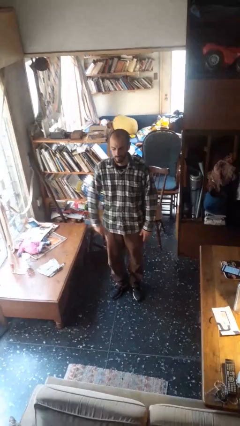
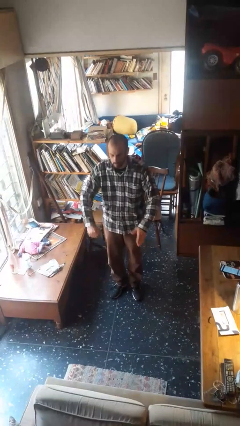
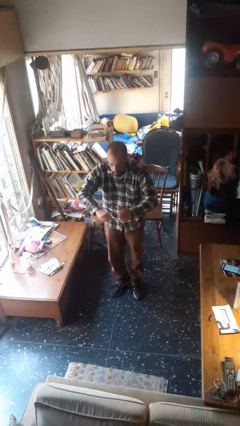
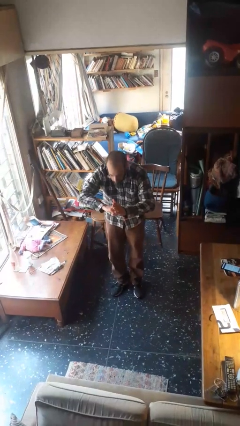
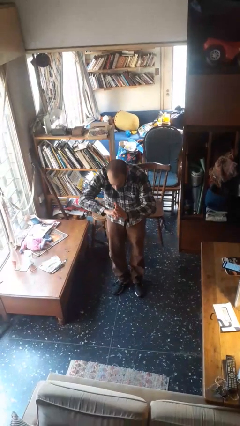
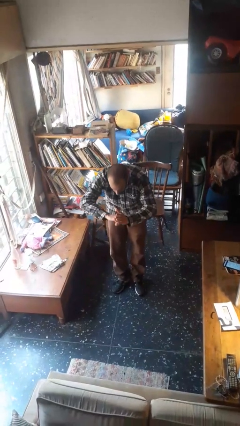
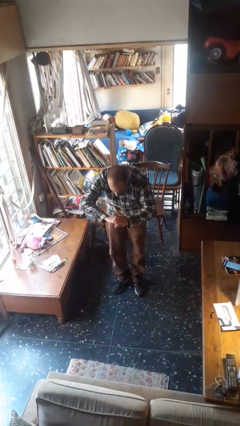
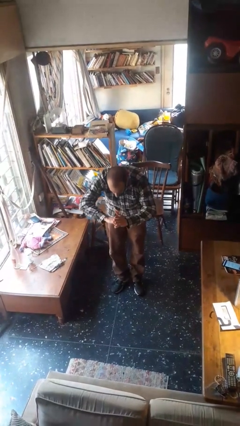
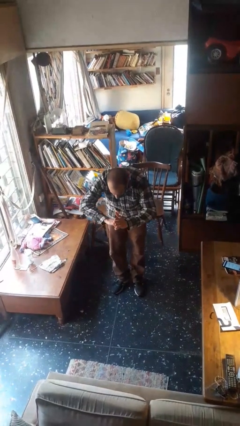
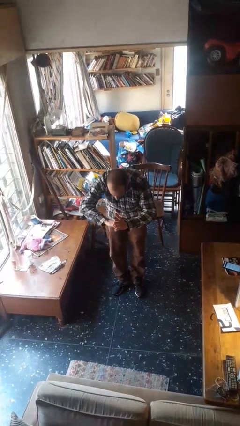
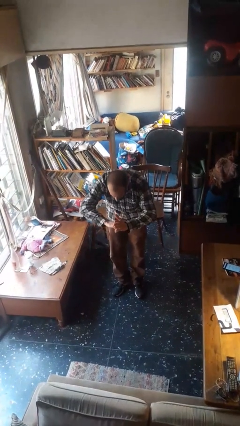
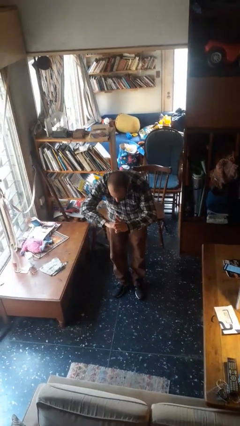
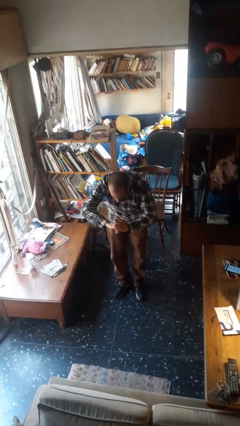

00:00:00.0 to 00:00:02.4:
person bows

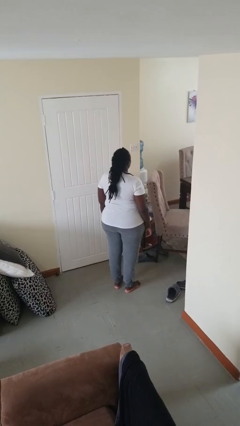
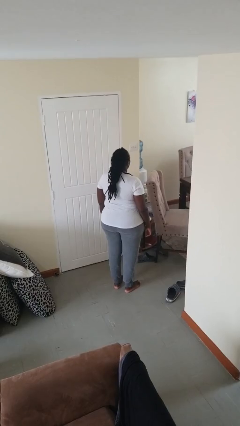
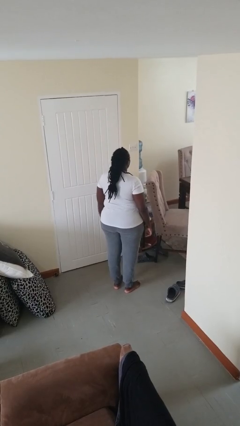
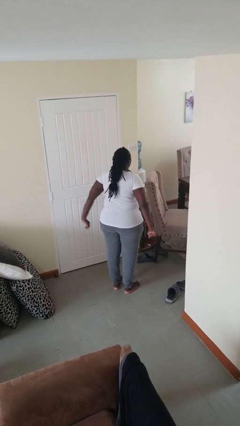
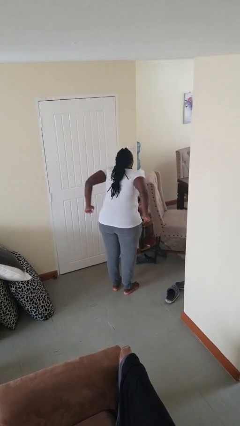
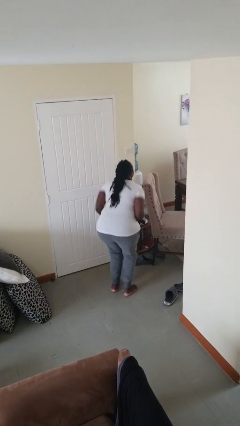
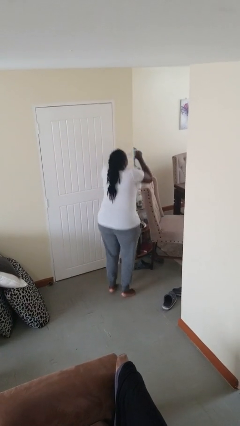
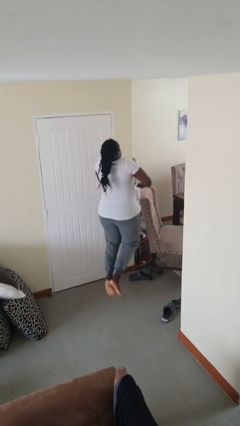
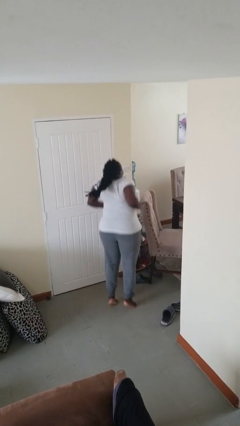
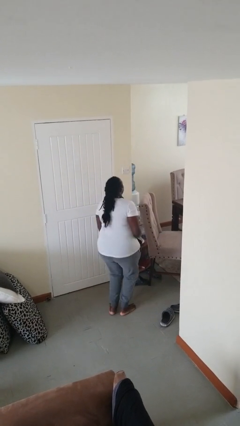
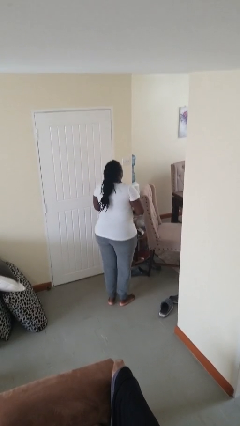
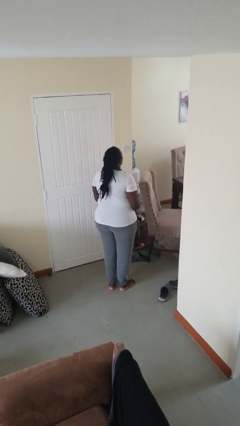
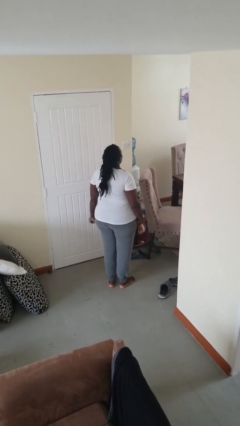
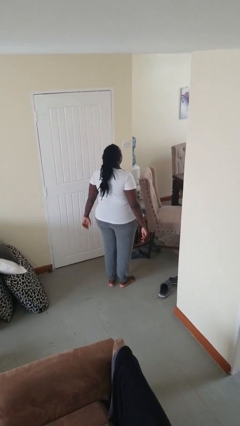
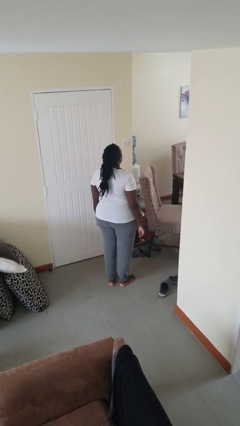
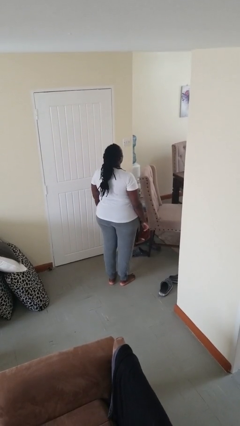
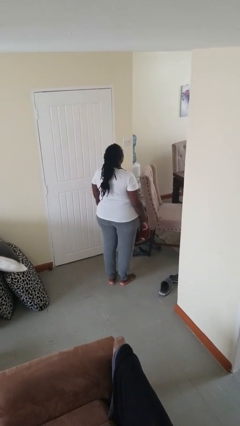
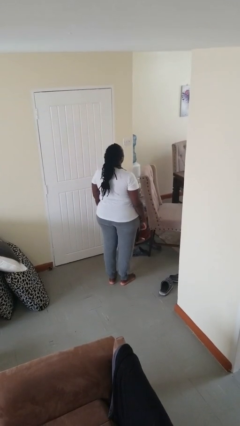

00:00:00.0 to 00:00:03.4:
person jumps

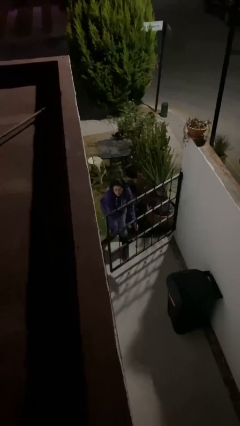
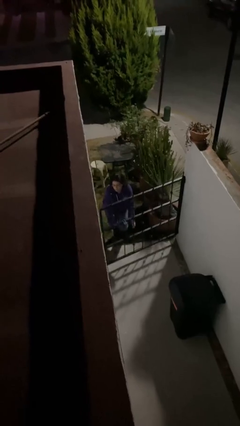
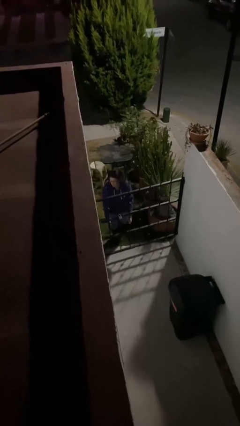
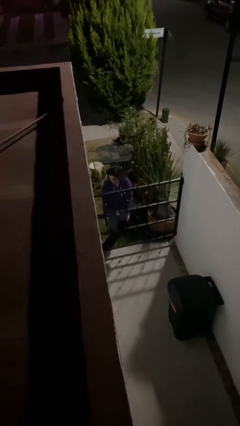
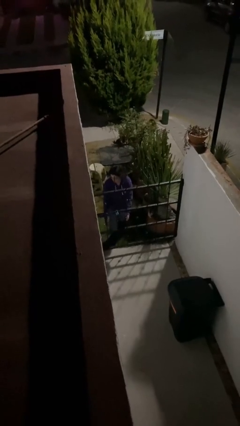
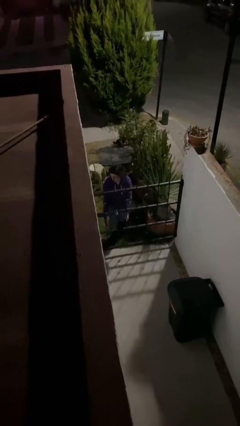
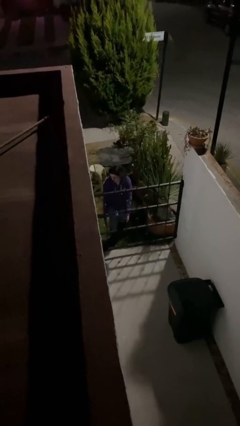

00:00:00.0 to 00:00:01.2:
person closes facility door

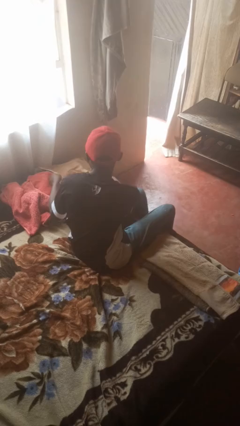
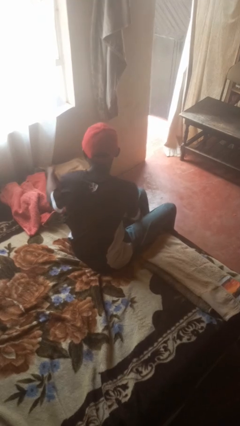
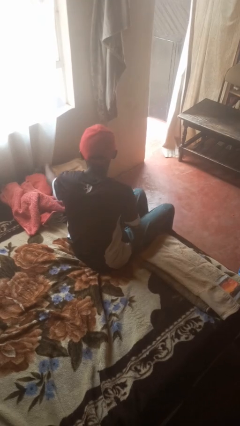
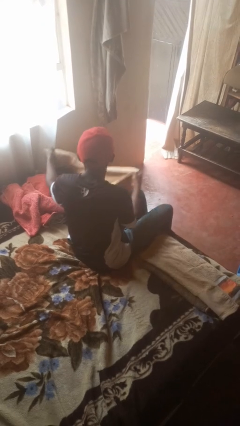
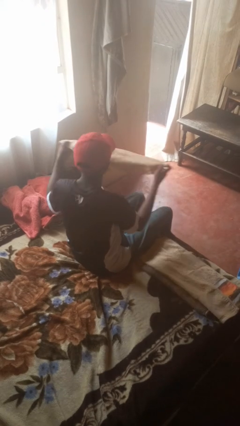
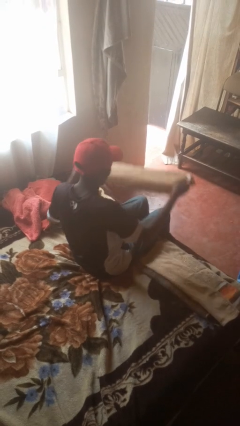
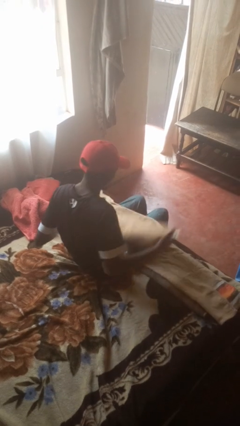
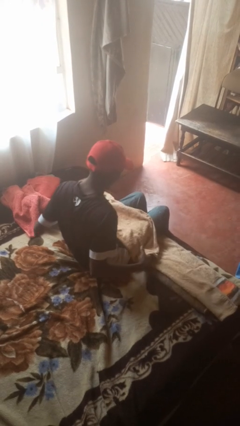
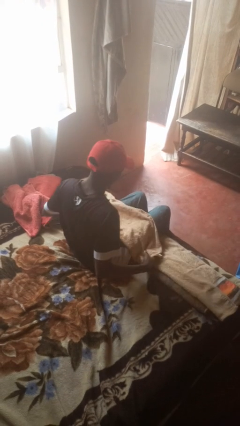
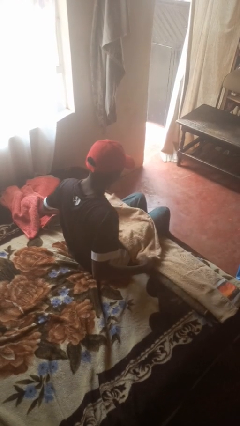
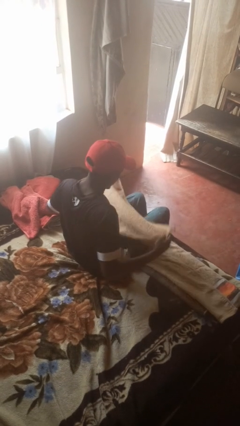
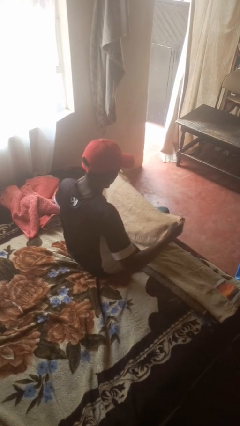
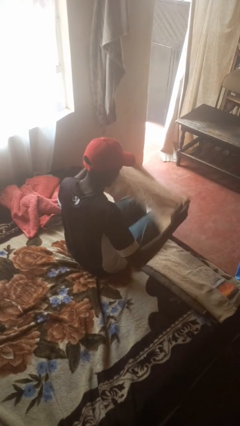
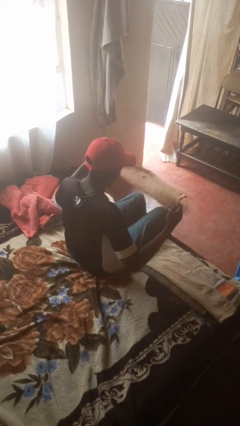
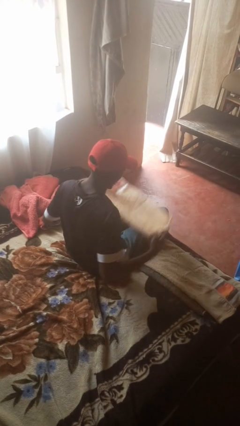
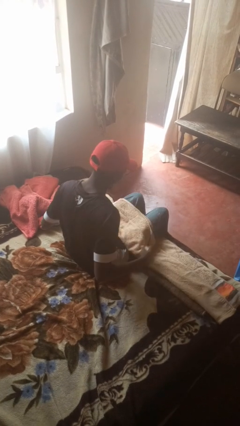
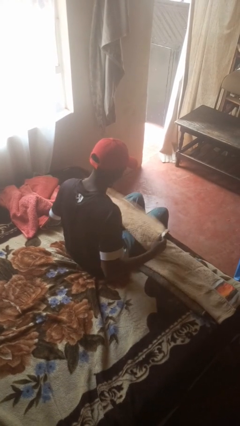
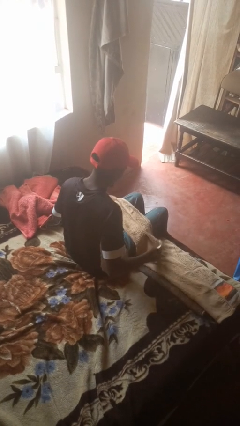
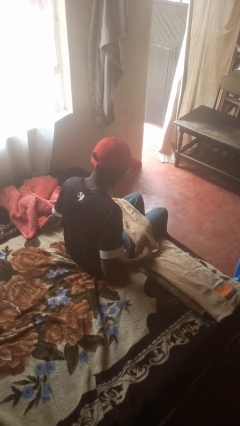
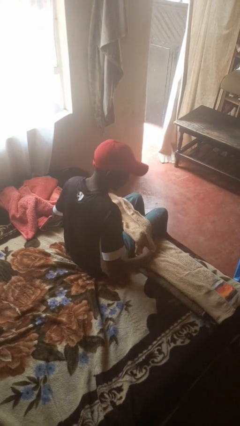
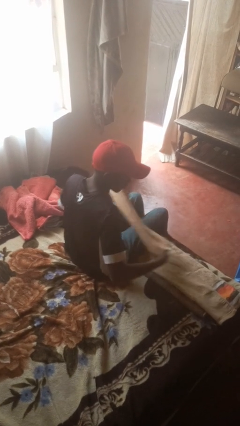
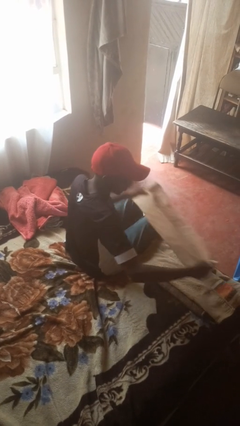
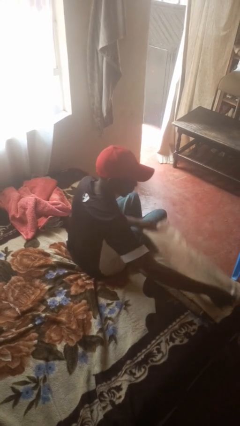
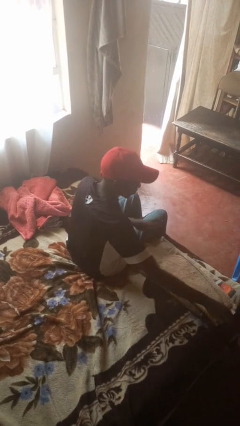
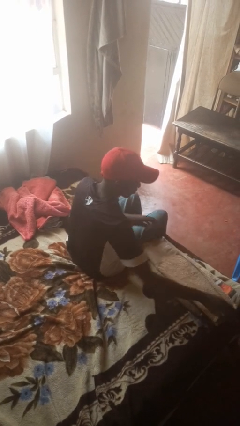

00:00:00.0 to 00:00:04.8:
person folds towel

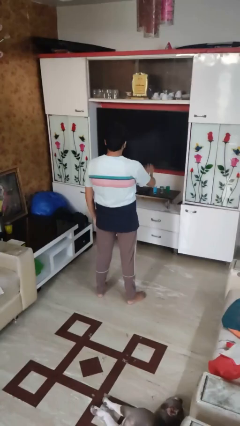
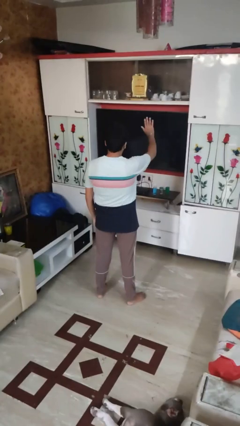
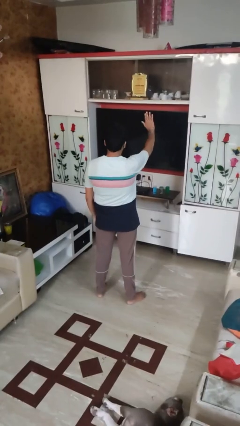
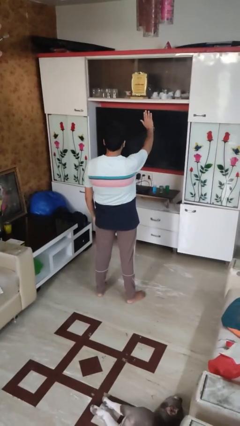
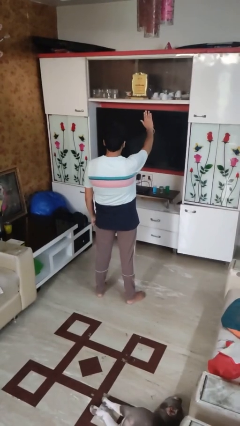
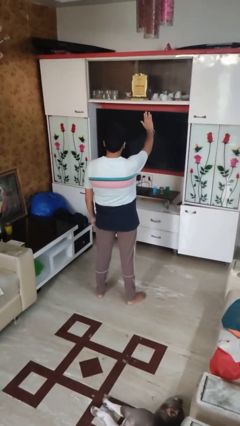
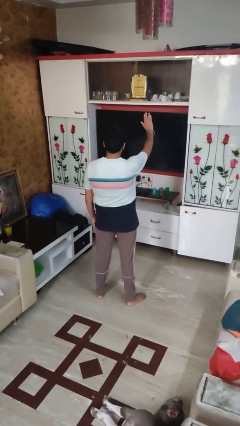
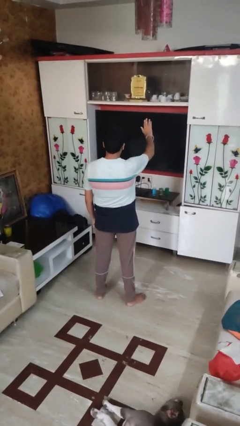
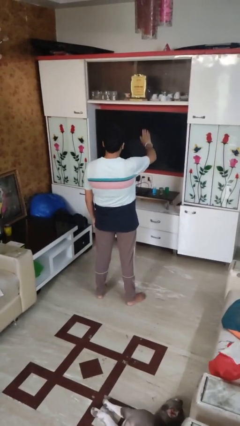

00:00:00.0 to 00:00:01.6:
person gestures stop

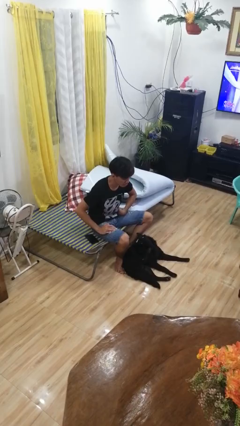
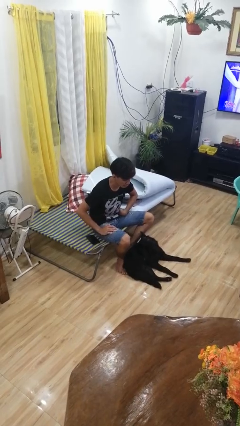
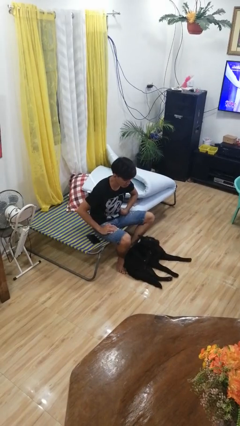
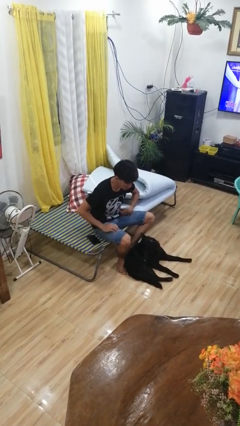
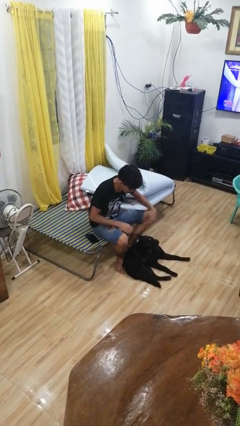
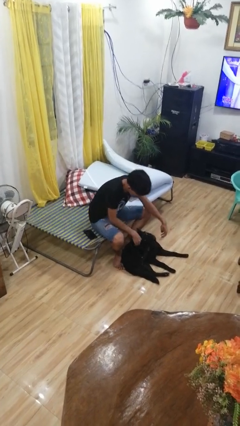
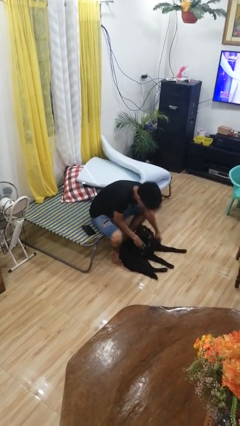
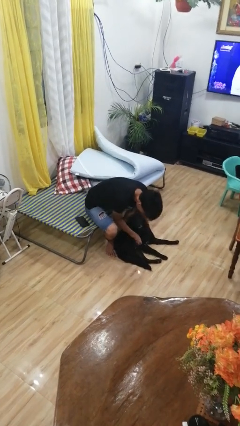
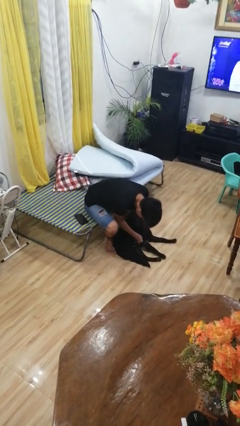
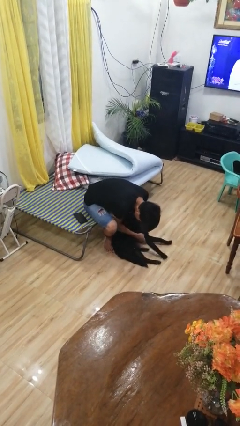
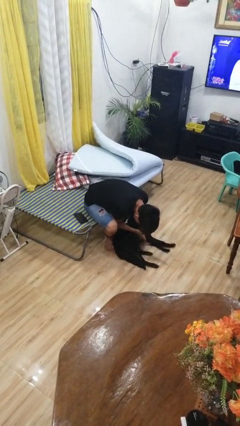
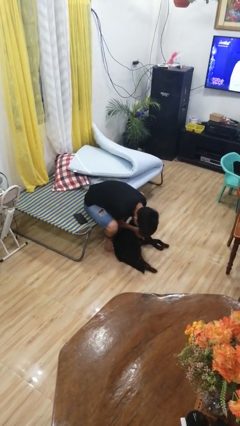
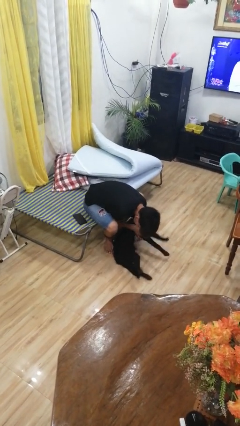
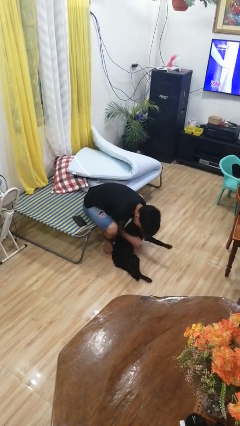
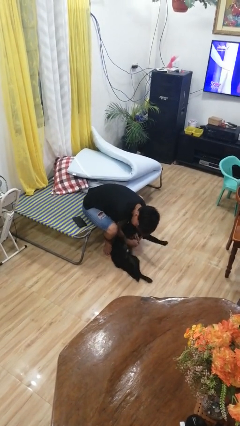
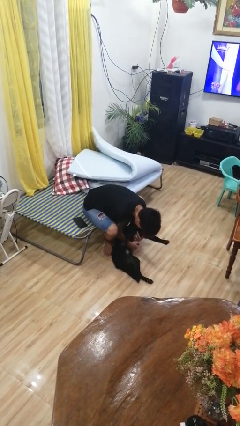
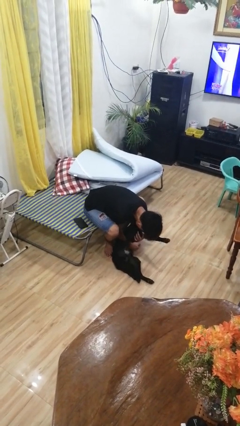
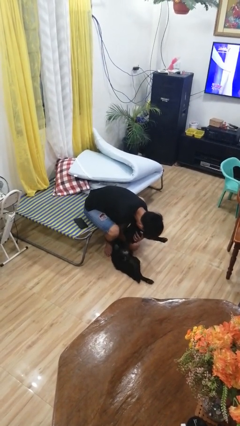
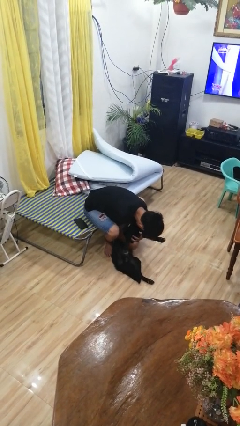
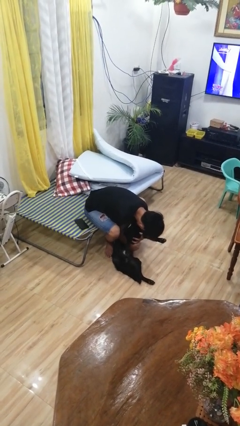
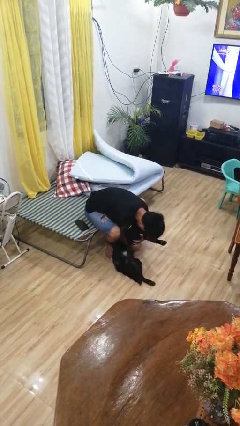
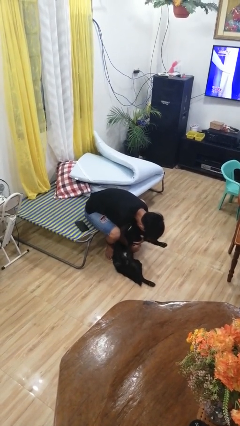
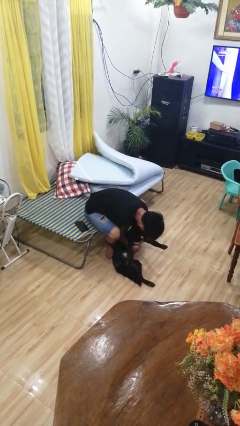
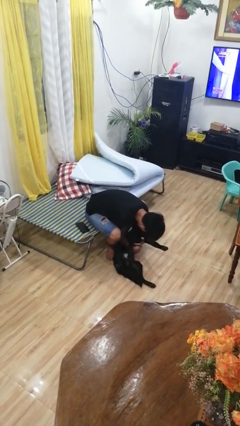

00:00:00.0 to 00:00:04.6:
person hugs dog

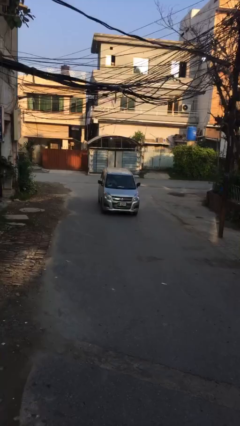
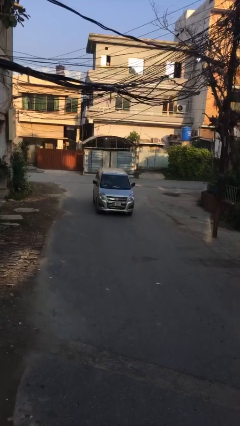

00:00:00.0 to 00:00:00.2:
car drops off person
